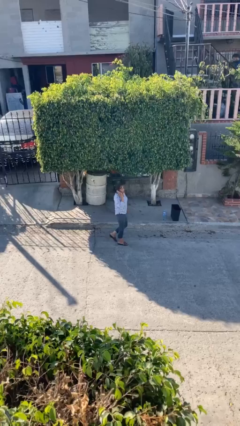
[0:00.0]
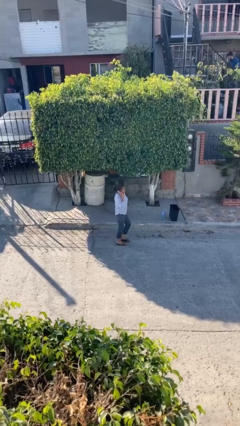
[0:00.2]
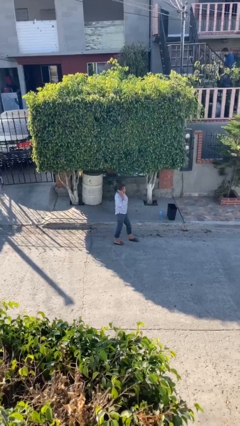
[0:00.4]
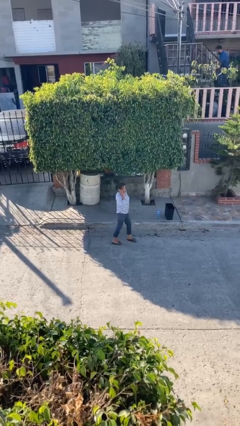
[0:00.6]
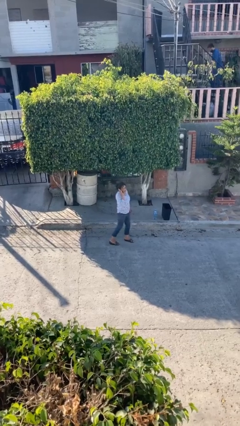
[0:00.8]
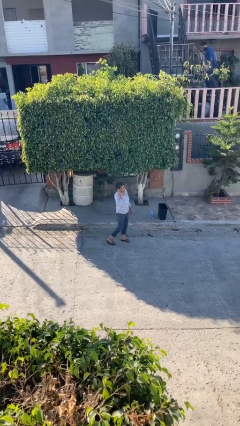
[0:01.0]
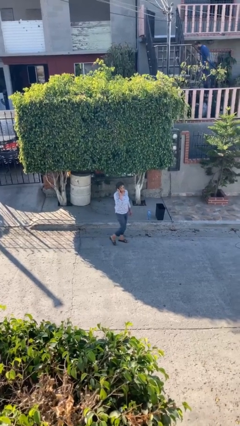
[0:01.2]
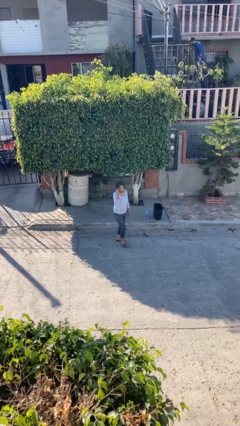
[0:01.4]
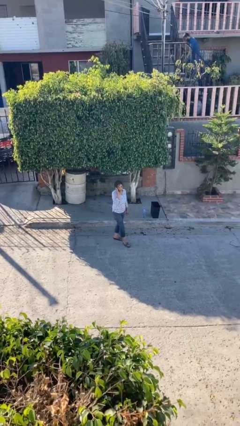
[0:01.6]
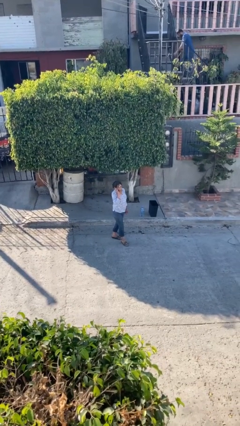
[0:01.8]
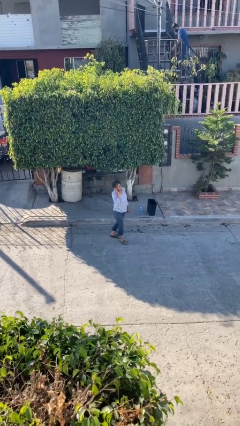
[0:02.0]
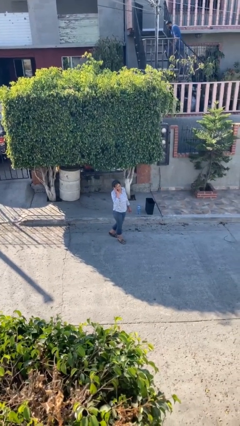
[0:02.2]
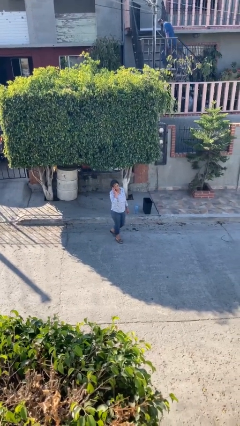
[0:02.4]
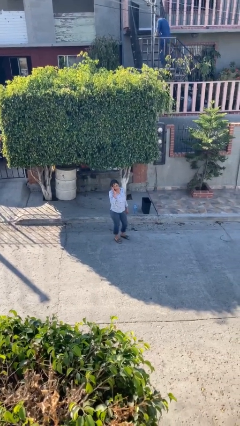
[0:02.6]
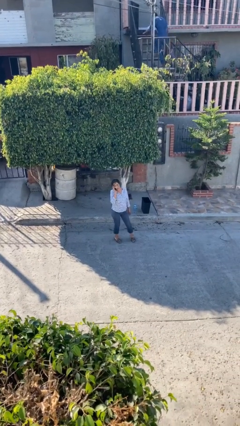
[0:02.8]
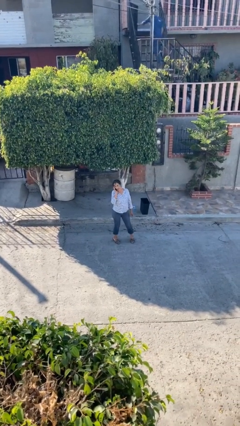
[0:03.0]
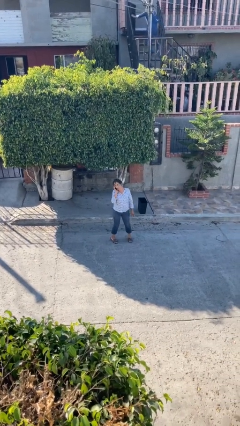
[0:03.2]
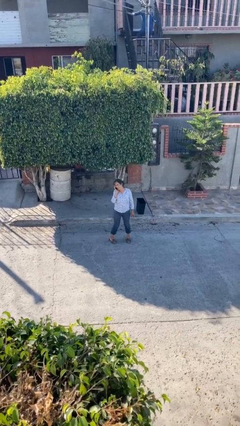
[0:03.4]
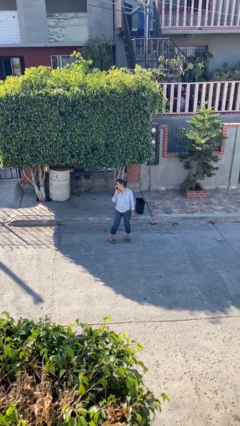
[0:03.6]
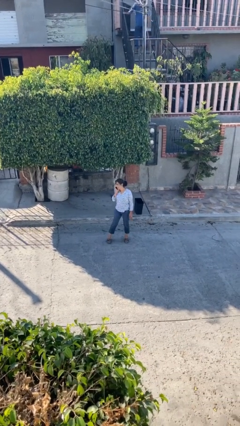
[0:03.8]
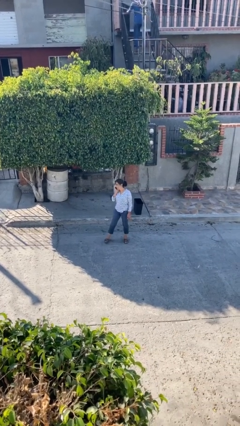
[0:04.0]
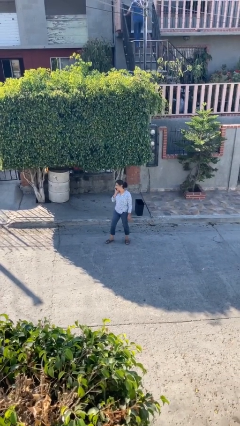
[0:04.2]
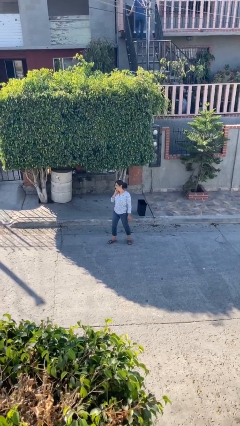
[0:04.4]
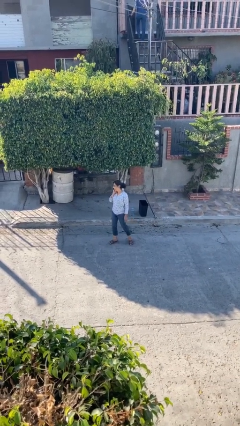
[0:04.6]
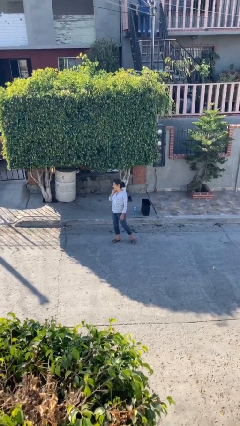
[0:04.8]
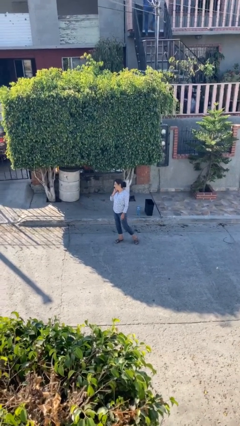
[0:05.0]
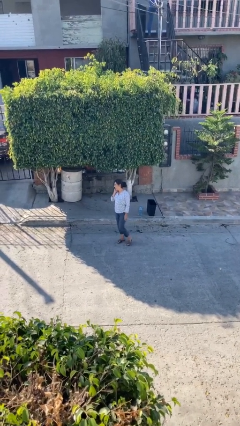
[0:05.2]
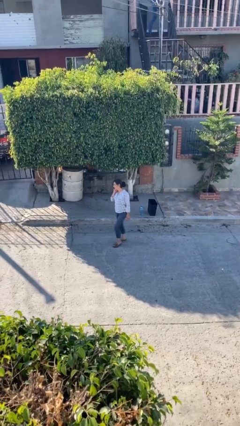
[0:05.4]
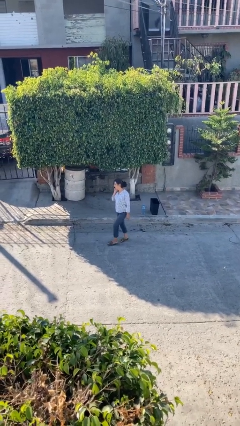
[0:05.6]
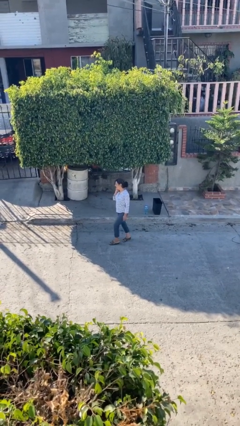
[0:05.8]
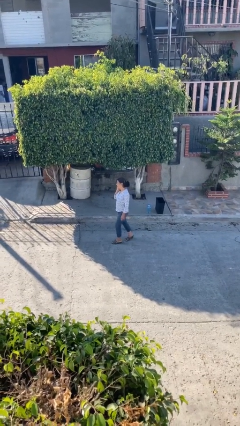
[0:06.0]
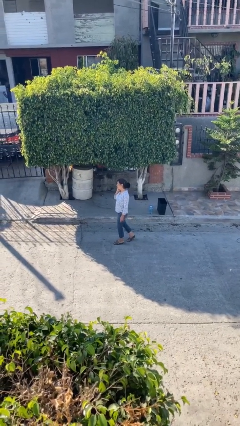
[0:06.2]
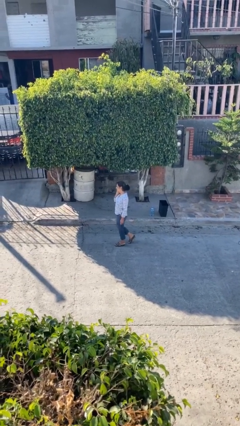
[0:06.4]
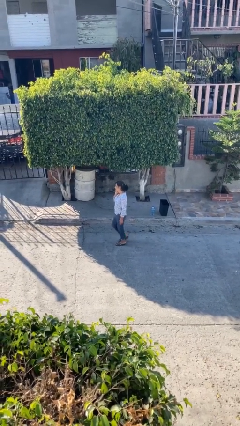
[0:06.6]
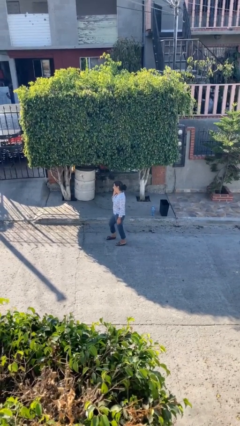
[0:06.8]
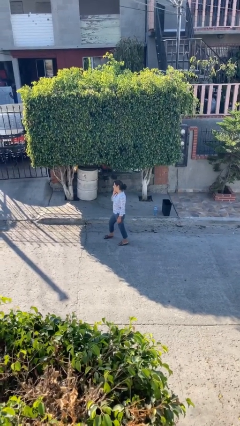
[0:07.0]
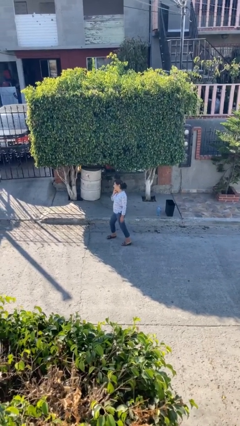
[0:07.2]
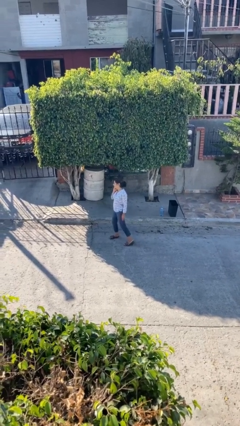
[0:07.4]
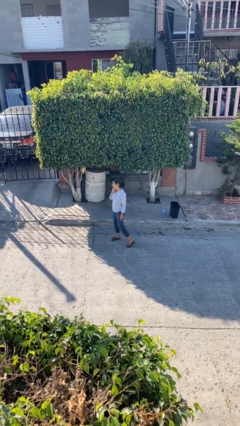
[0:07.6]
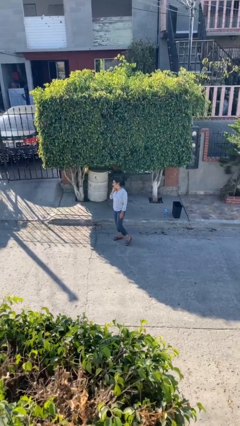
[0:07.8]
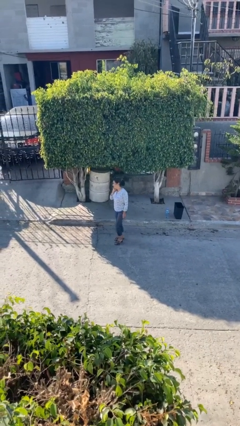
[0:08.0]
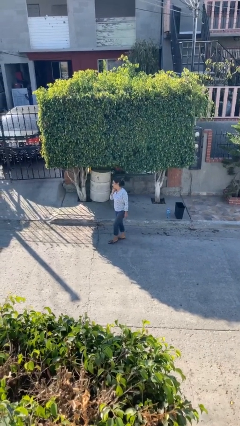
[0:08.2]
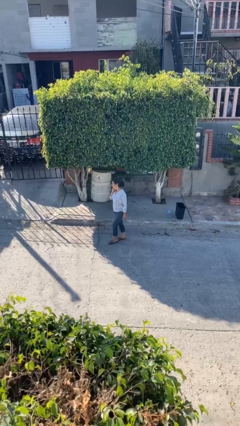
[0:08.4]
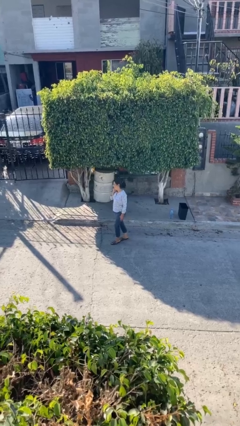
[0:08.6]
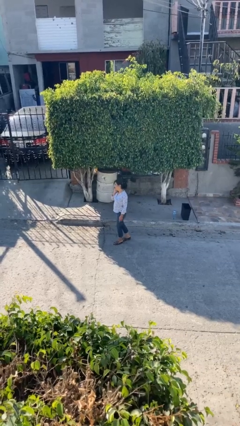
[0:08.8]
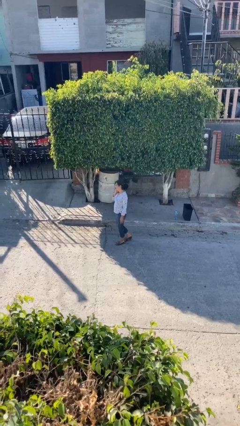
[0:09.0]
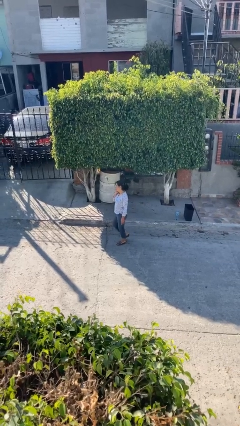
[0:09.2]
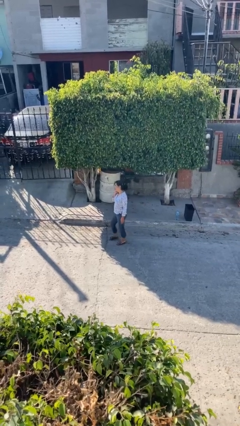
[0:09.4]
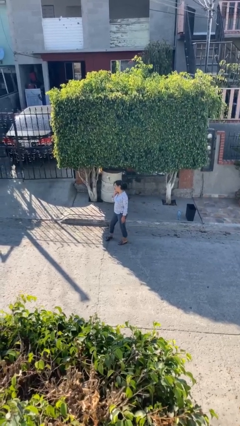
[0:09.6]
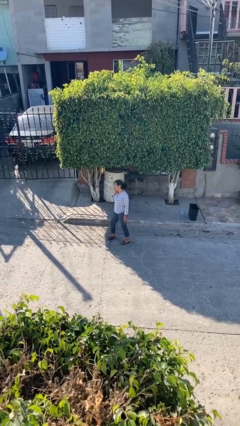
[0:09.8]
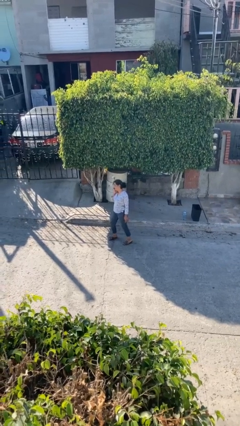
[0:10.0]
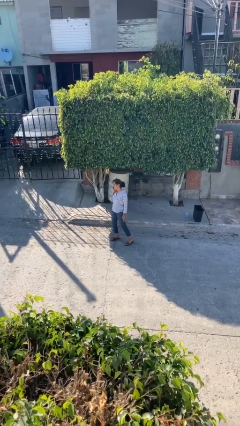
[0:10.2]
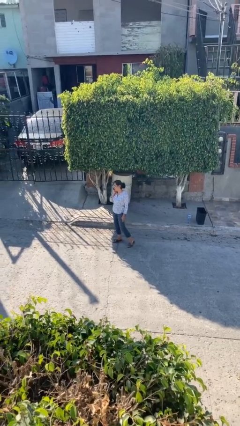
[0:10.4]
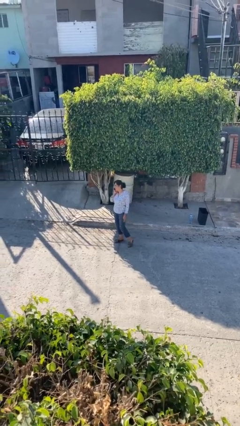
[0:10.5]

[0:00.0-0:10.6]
person talks on phone

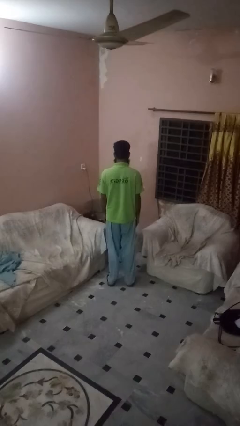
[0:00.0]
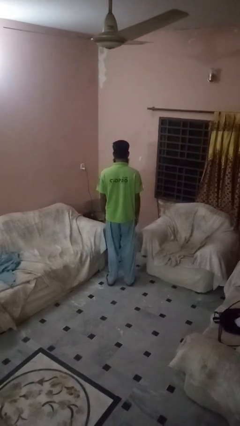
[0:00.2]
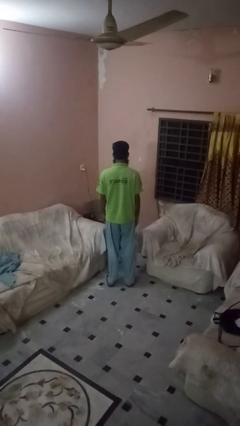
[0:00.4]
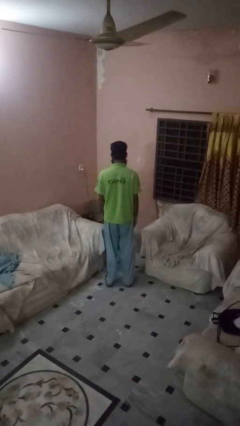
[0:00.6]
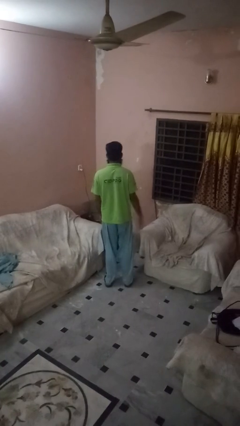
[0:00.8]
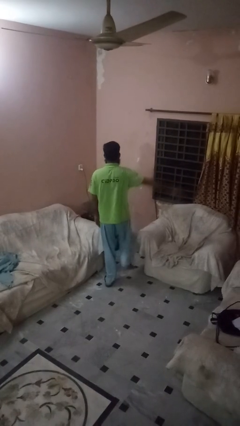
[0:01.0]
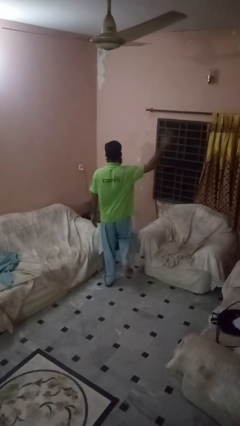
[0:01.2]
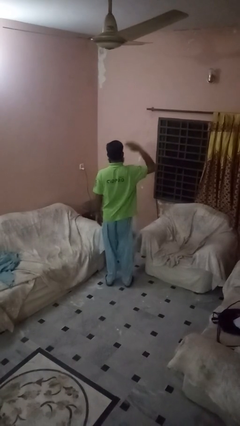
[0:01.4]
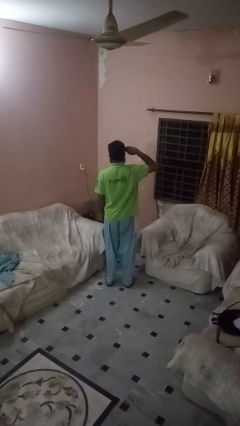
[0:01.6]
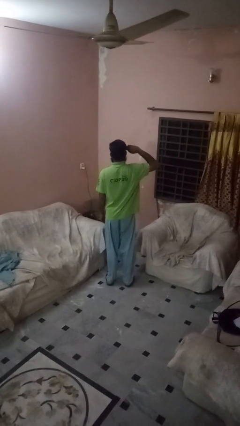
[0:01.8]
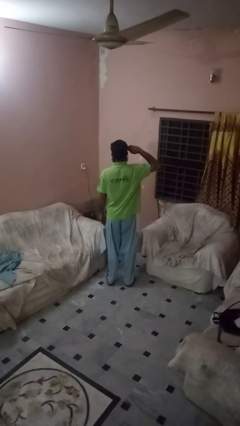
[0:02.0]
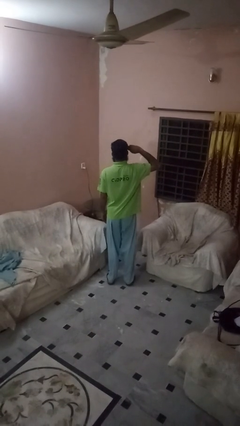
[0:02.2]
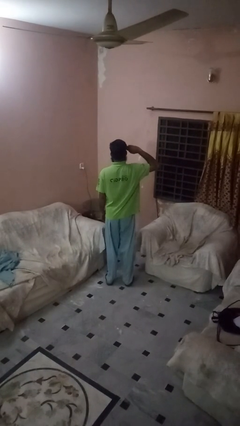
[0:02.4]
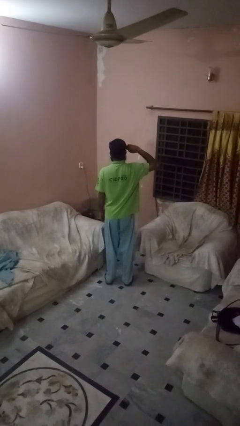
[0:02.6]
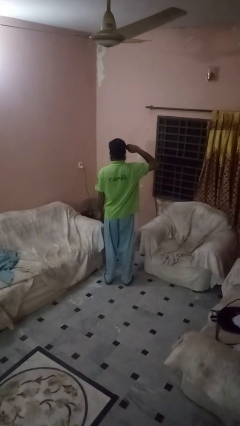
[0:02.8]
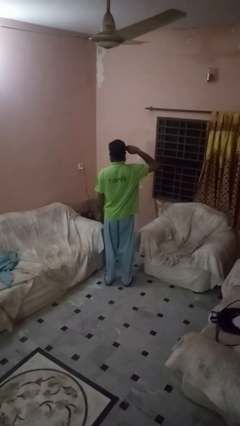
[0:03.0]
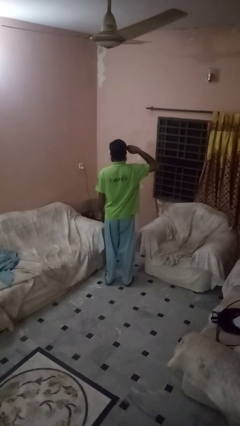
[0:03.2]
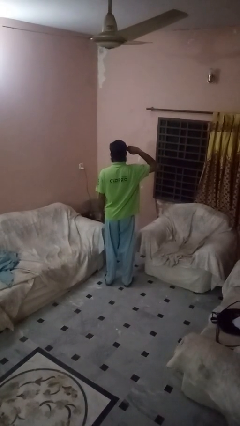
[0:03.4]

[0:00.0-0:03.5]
person salutes

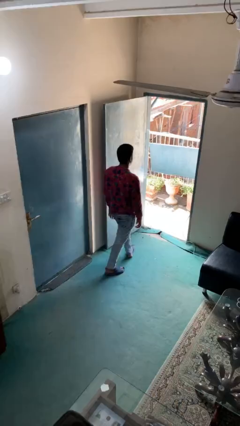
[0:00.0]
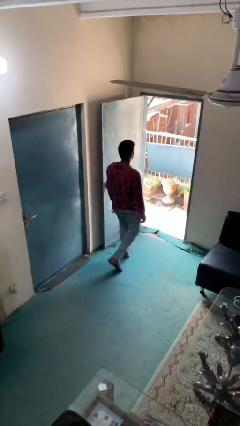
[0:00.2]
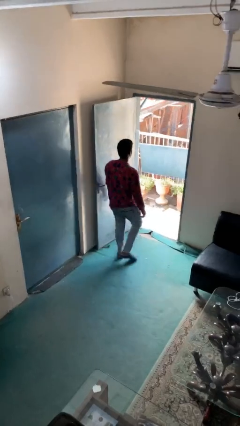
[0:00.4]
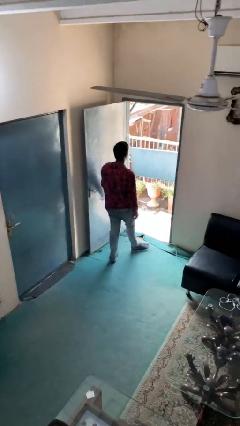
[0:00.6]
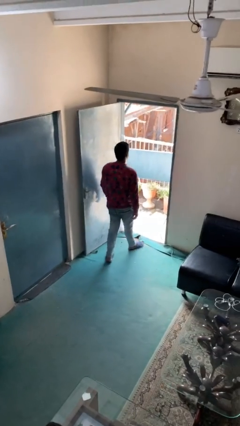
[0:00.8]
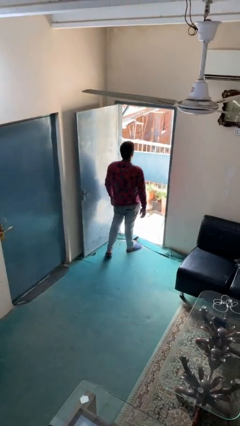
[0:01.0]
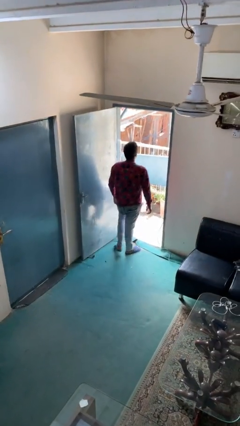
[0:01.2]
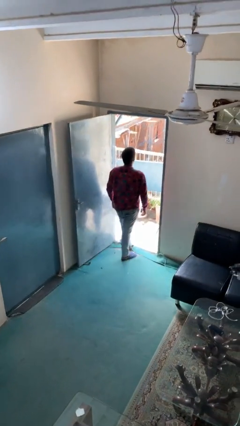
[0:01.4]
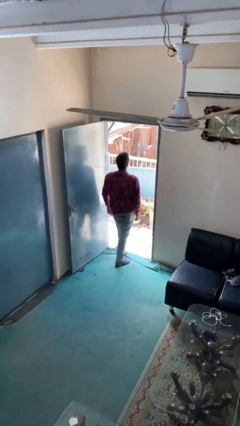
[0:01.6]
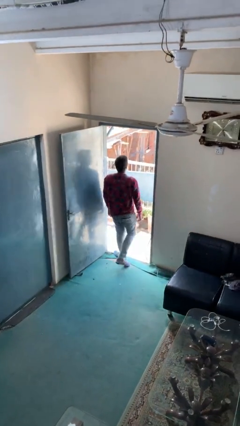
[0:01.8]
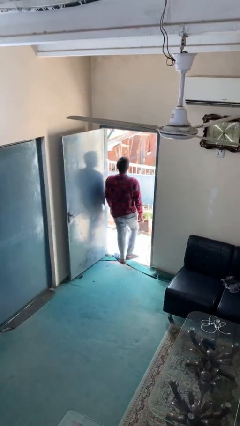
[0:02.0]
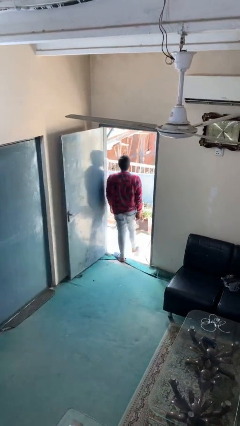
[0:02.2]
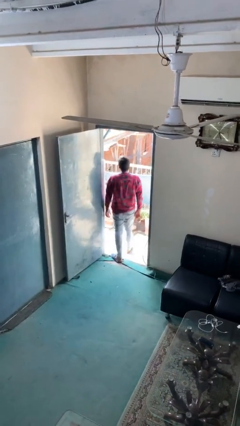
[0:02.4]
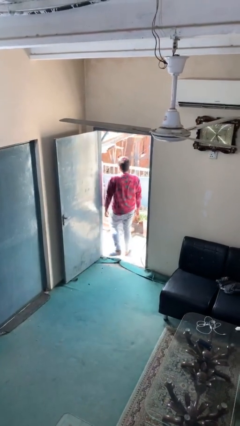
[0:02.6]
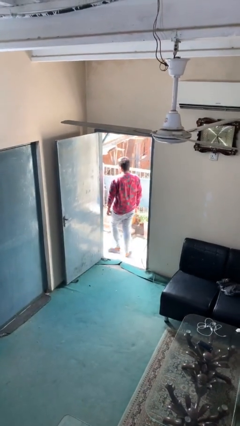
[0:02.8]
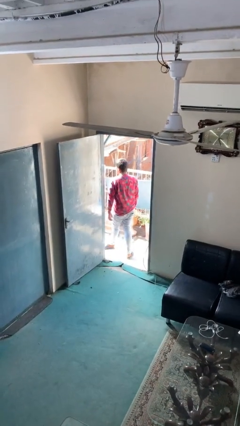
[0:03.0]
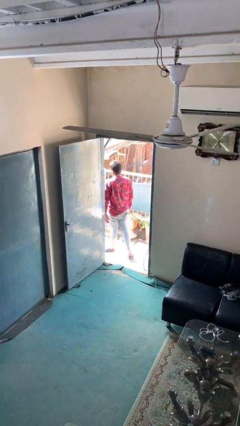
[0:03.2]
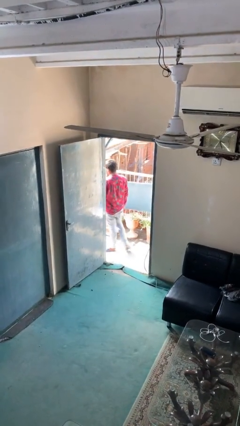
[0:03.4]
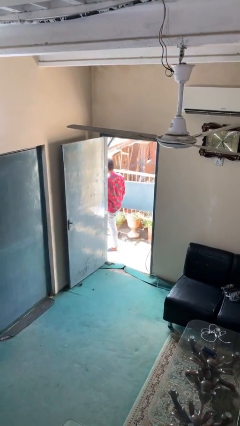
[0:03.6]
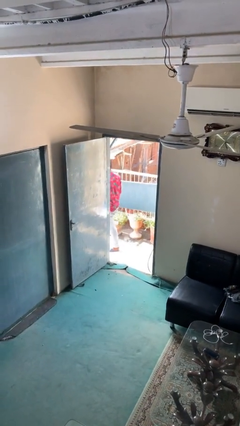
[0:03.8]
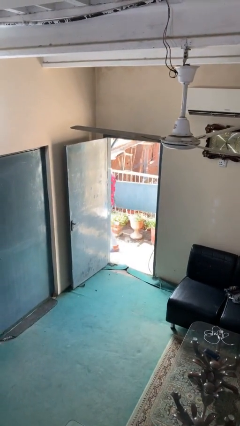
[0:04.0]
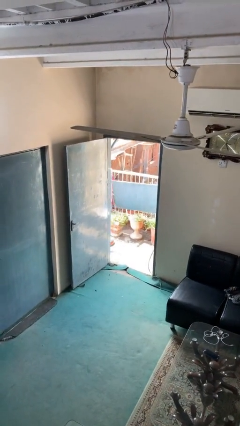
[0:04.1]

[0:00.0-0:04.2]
person exits scene through structure
